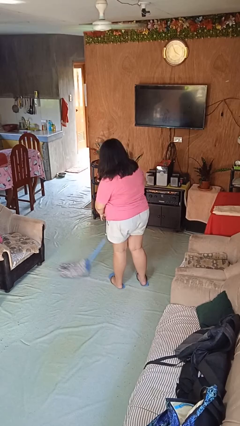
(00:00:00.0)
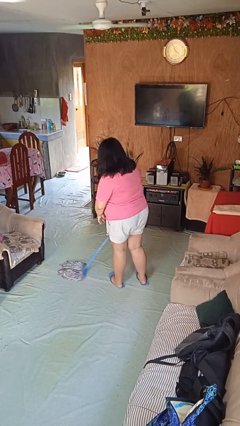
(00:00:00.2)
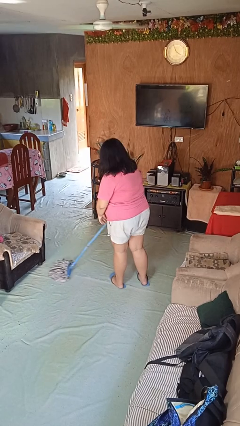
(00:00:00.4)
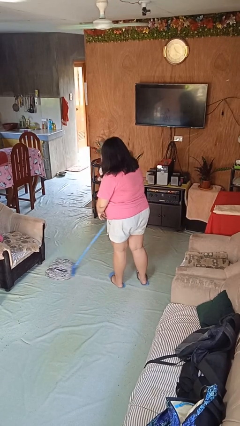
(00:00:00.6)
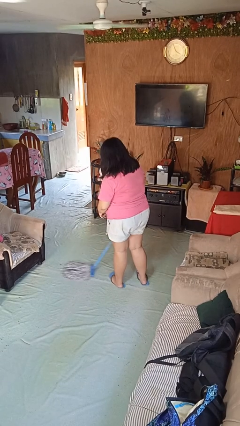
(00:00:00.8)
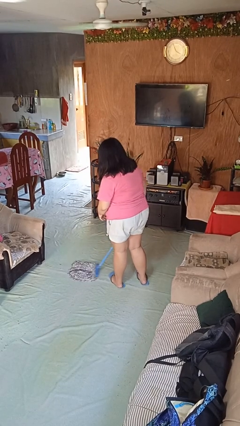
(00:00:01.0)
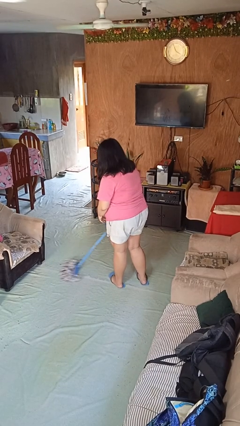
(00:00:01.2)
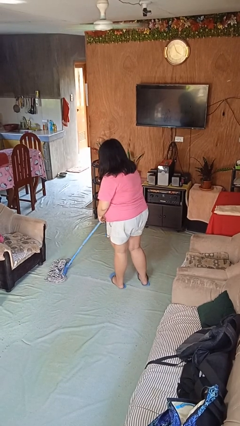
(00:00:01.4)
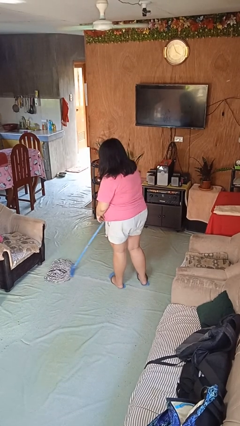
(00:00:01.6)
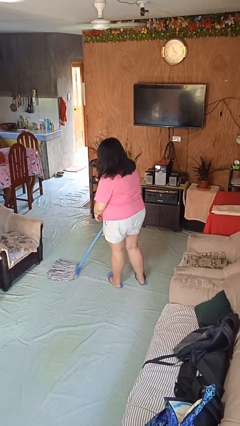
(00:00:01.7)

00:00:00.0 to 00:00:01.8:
person mops

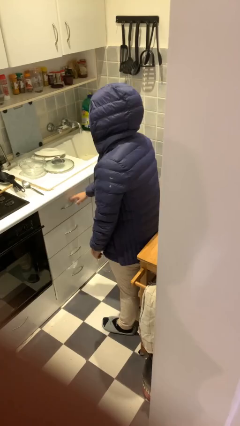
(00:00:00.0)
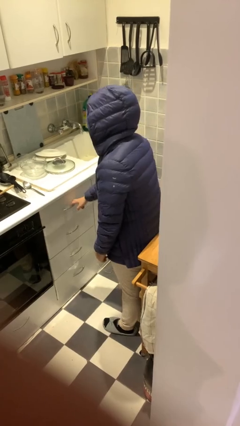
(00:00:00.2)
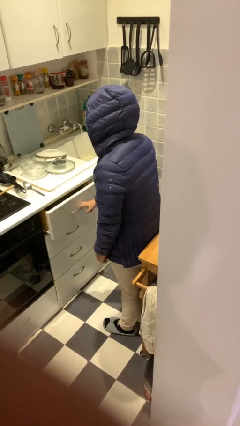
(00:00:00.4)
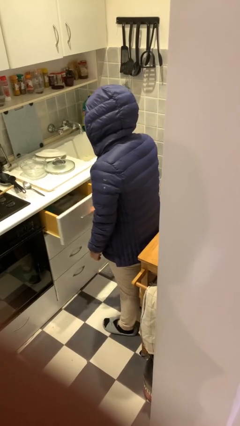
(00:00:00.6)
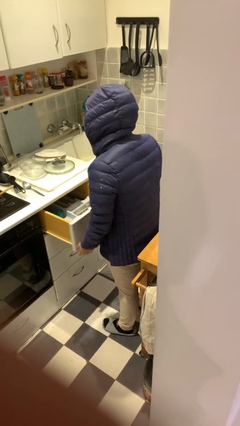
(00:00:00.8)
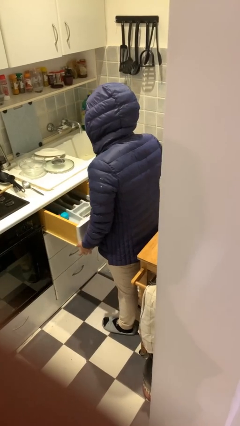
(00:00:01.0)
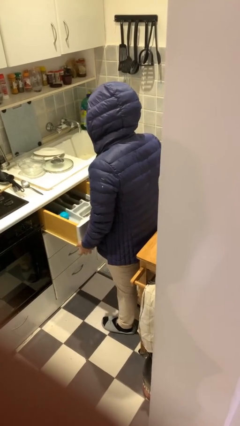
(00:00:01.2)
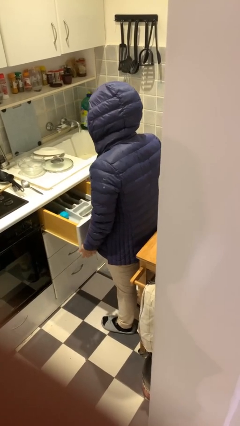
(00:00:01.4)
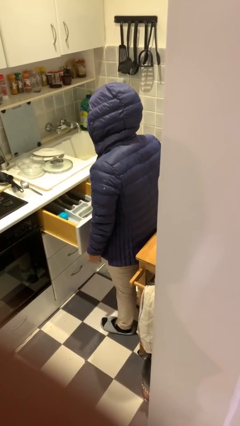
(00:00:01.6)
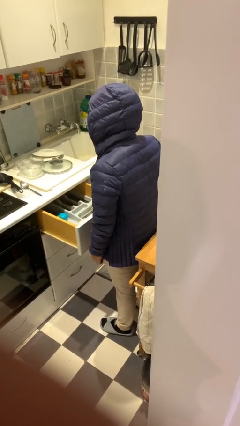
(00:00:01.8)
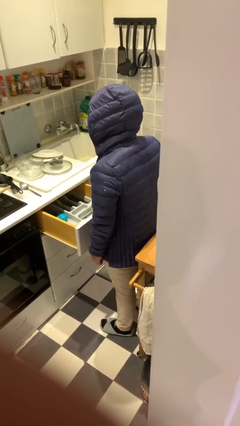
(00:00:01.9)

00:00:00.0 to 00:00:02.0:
person opens kitchen drawer

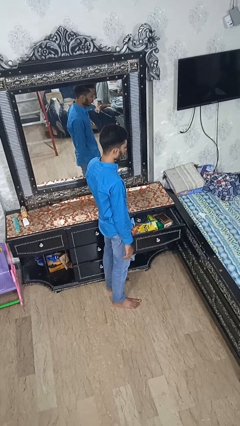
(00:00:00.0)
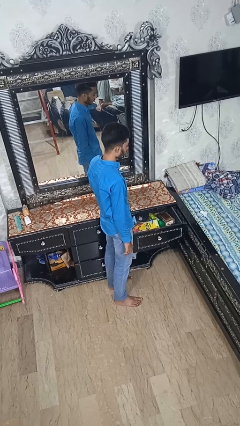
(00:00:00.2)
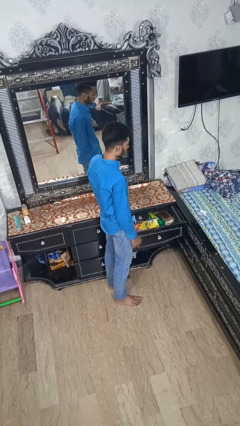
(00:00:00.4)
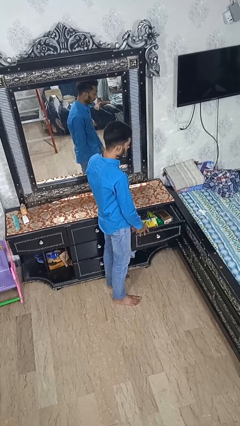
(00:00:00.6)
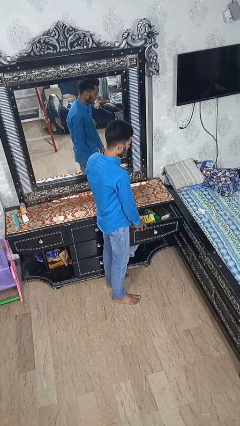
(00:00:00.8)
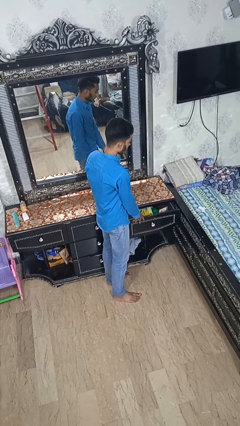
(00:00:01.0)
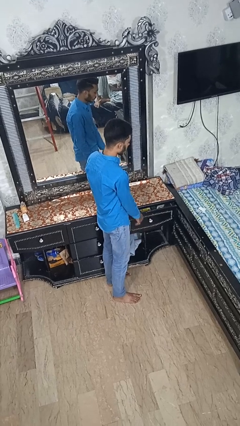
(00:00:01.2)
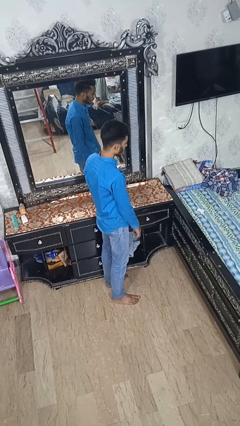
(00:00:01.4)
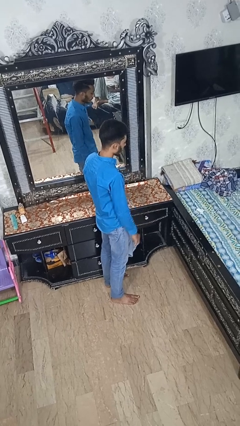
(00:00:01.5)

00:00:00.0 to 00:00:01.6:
person closes dresser drawer

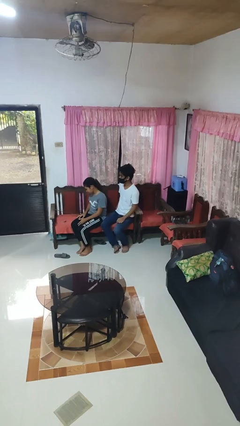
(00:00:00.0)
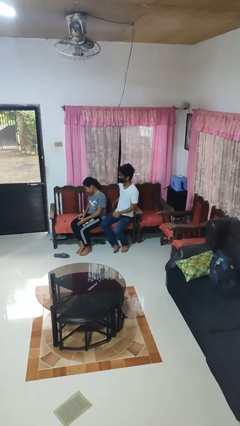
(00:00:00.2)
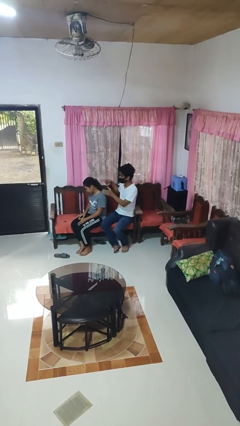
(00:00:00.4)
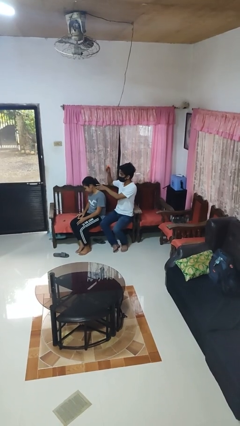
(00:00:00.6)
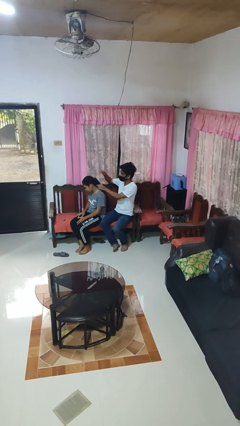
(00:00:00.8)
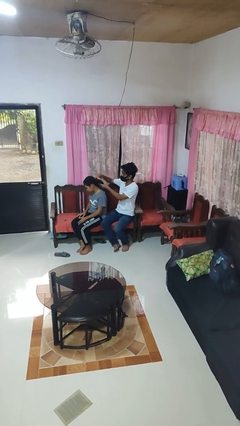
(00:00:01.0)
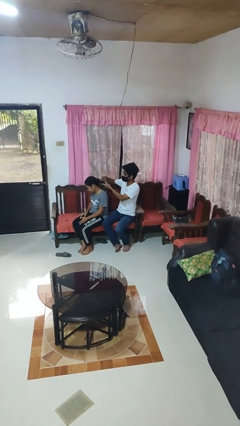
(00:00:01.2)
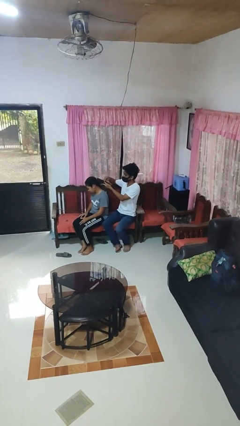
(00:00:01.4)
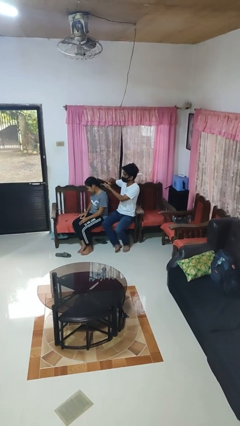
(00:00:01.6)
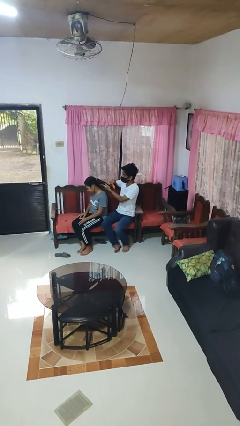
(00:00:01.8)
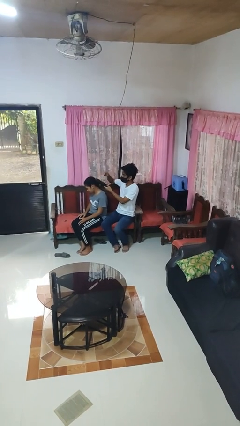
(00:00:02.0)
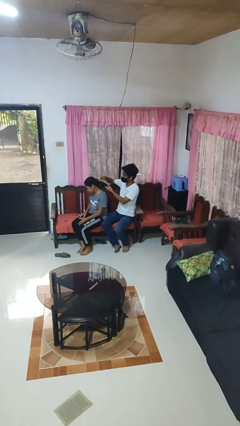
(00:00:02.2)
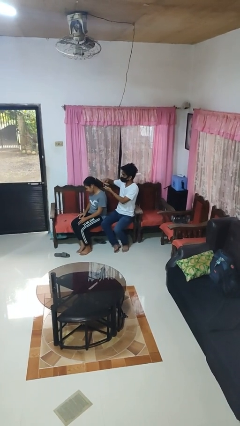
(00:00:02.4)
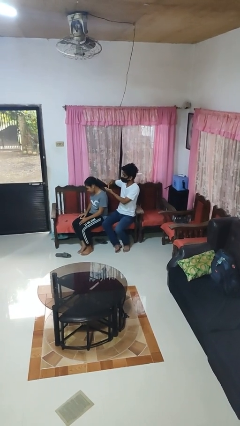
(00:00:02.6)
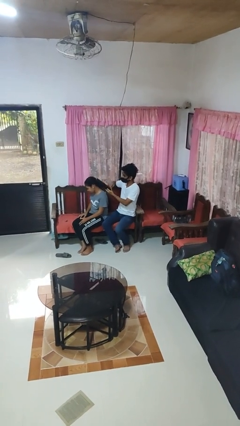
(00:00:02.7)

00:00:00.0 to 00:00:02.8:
person brushes hair of person

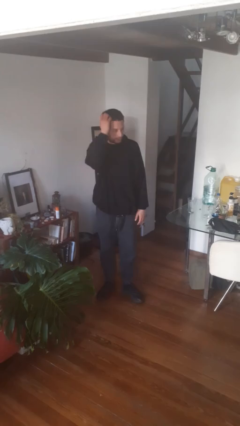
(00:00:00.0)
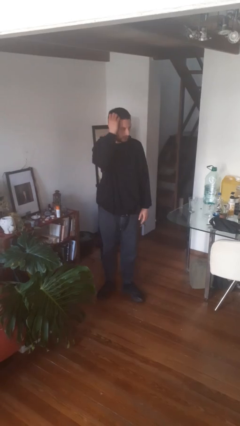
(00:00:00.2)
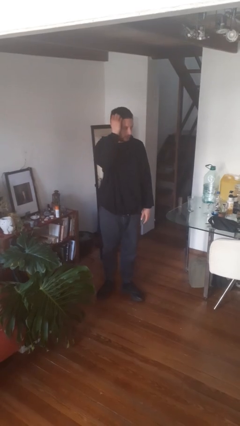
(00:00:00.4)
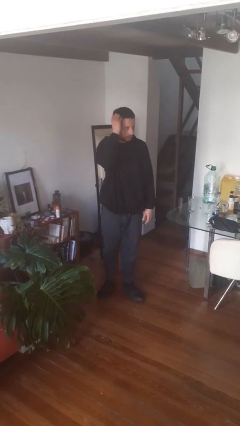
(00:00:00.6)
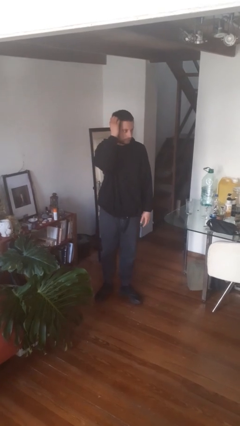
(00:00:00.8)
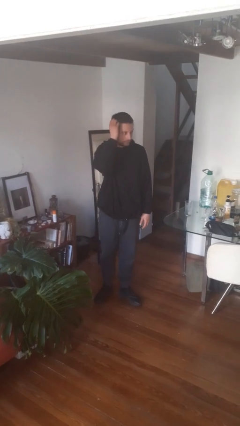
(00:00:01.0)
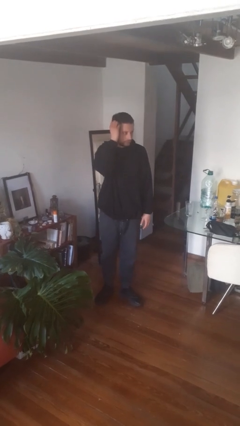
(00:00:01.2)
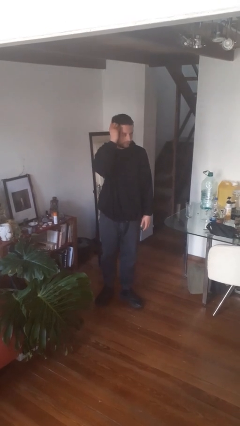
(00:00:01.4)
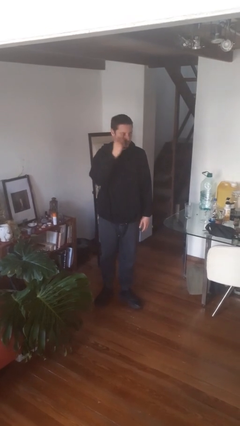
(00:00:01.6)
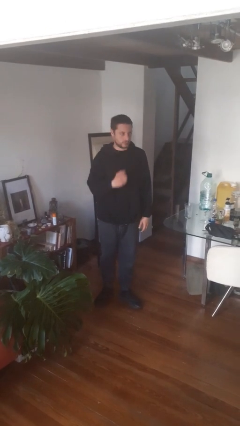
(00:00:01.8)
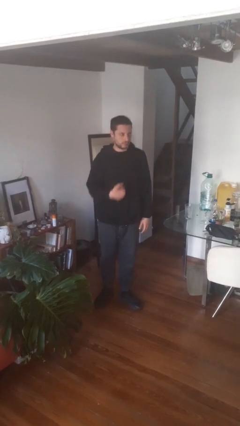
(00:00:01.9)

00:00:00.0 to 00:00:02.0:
person scratches face

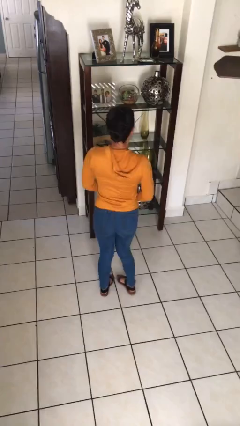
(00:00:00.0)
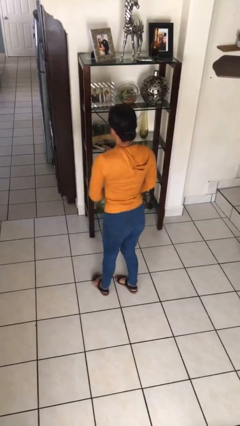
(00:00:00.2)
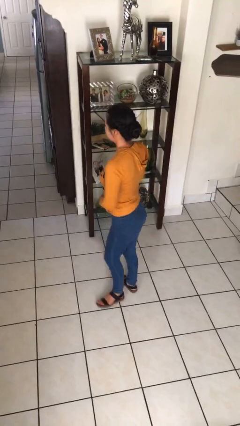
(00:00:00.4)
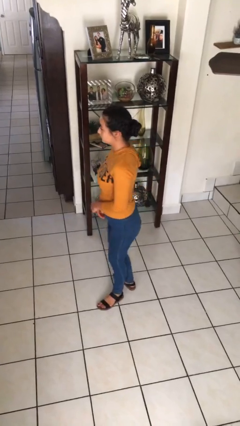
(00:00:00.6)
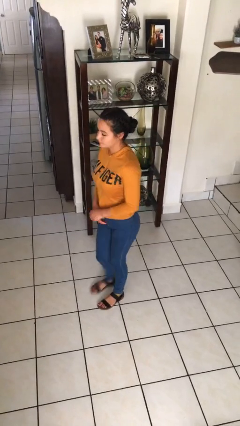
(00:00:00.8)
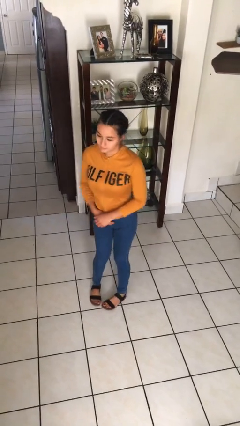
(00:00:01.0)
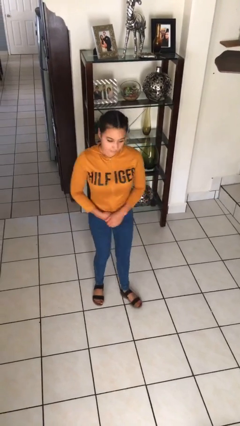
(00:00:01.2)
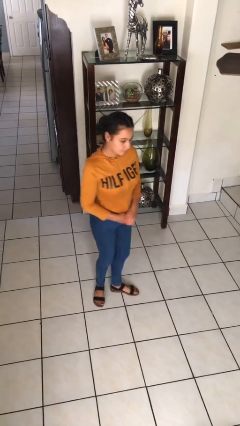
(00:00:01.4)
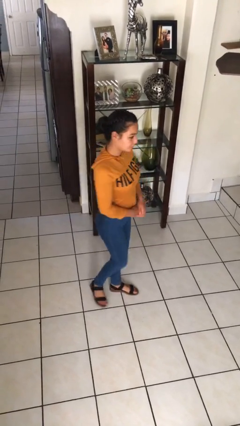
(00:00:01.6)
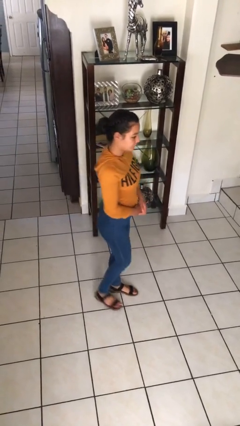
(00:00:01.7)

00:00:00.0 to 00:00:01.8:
person twirls

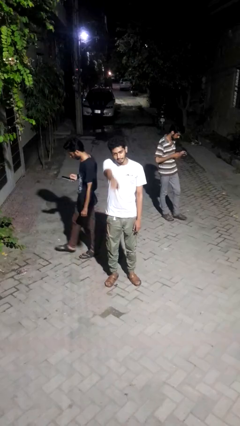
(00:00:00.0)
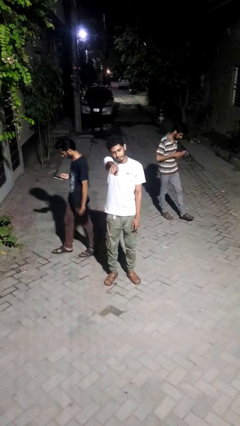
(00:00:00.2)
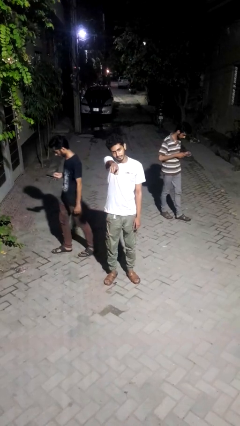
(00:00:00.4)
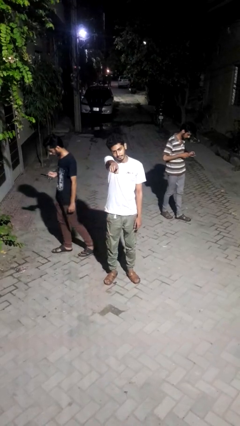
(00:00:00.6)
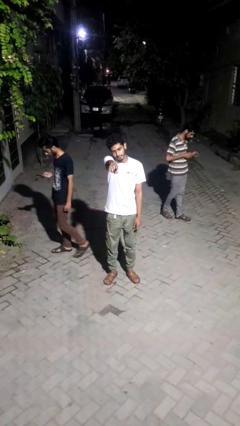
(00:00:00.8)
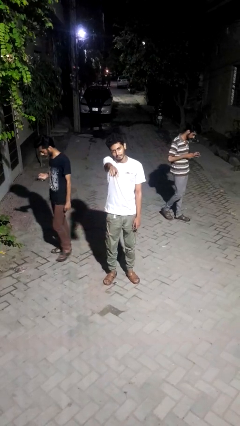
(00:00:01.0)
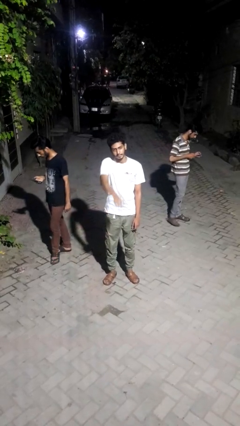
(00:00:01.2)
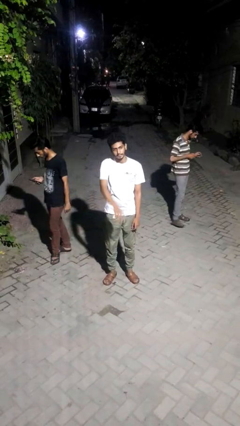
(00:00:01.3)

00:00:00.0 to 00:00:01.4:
person points at person

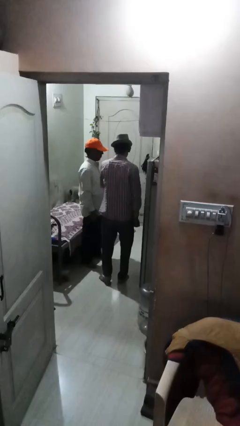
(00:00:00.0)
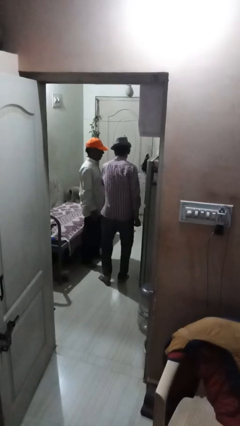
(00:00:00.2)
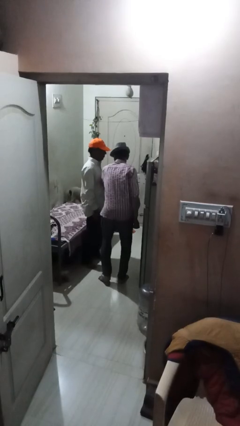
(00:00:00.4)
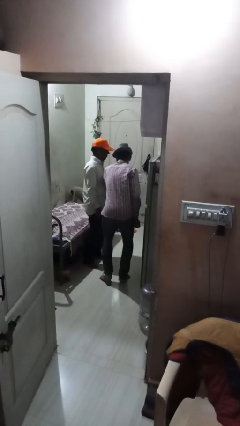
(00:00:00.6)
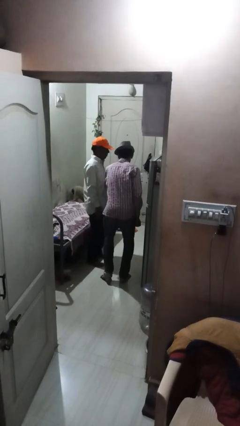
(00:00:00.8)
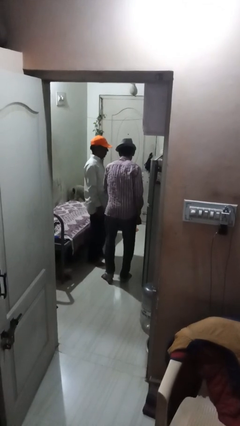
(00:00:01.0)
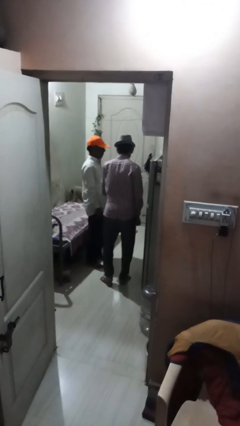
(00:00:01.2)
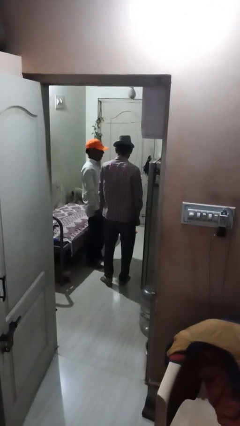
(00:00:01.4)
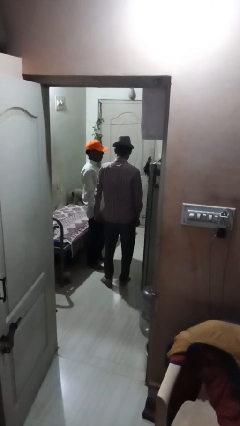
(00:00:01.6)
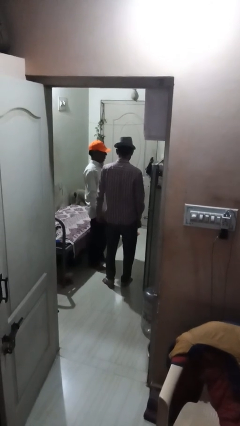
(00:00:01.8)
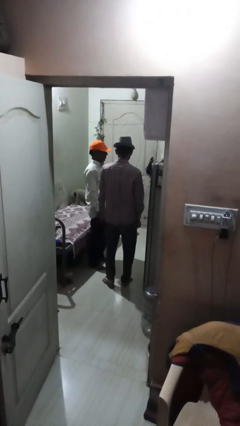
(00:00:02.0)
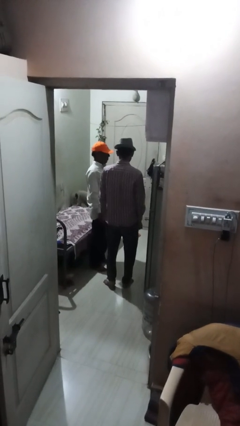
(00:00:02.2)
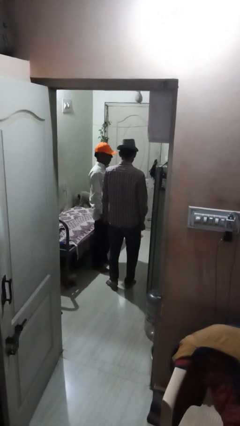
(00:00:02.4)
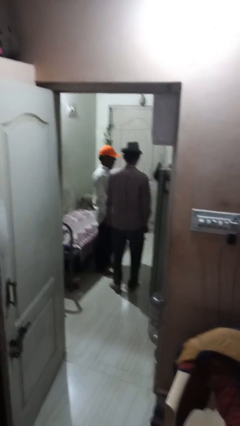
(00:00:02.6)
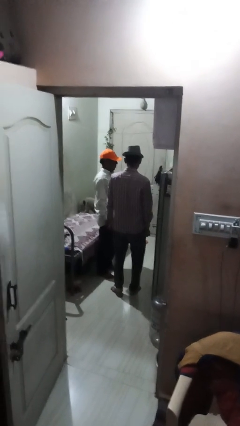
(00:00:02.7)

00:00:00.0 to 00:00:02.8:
person nudges person with elbow

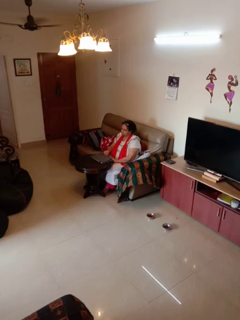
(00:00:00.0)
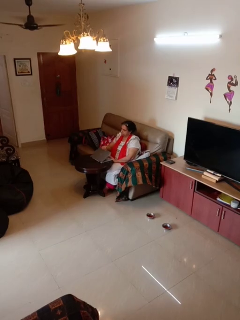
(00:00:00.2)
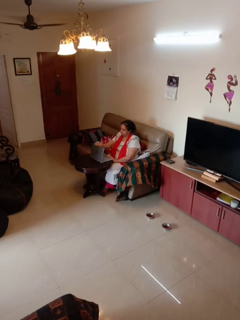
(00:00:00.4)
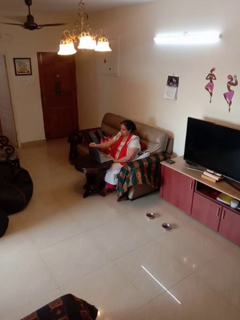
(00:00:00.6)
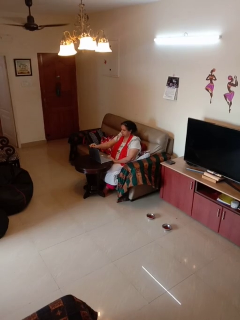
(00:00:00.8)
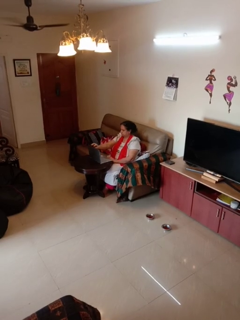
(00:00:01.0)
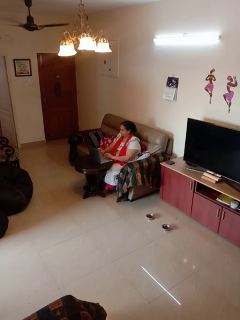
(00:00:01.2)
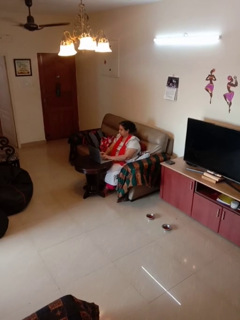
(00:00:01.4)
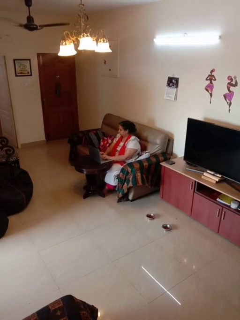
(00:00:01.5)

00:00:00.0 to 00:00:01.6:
person opens laptop
